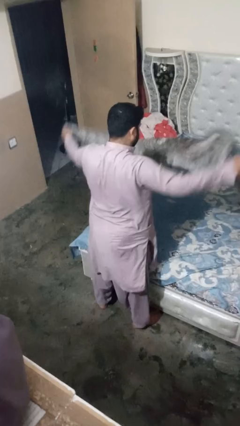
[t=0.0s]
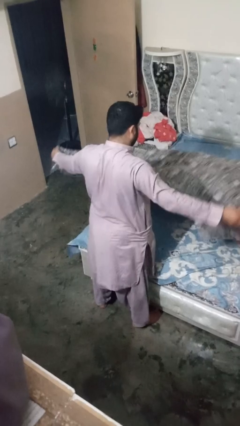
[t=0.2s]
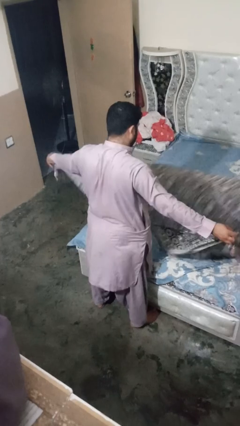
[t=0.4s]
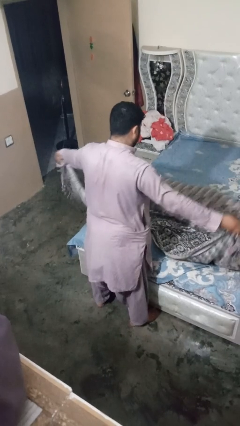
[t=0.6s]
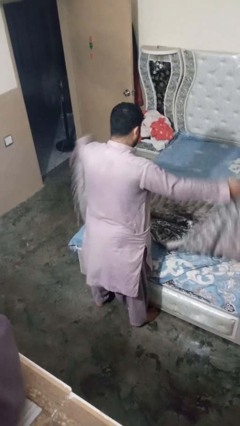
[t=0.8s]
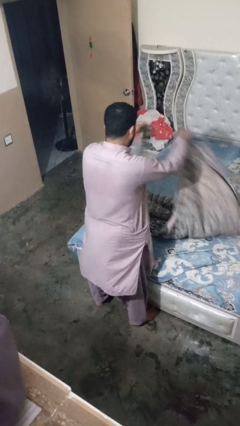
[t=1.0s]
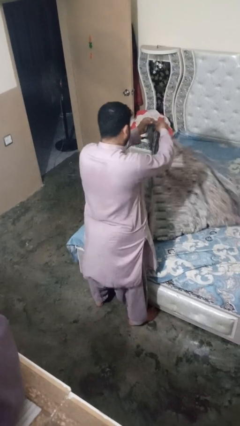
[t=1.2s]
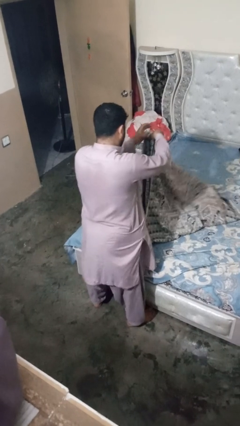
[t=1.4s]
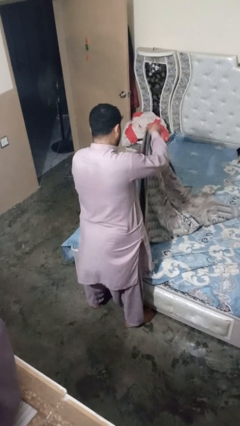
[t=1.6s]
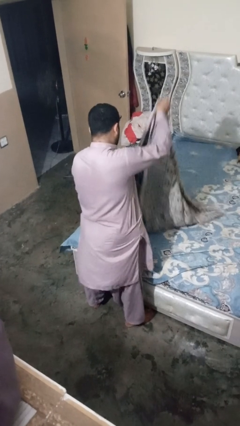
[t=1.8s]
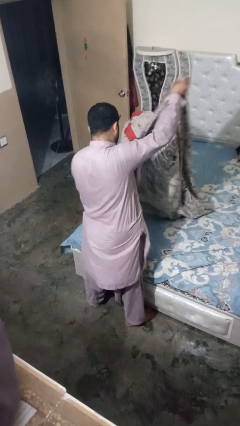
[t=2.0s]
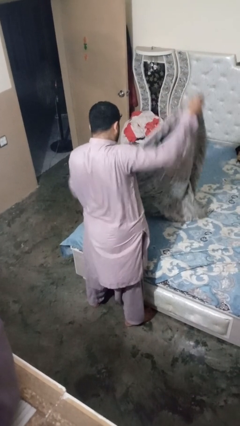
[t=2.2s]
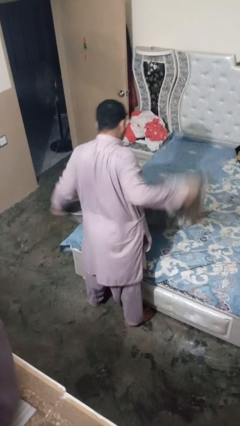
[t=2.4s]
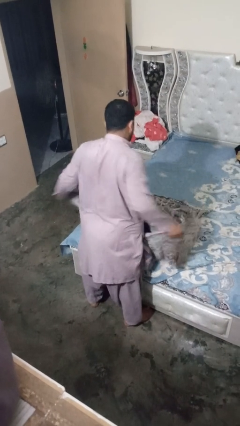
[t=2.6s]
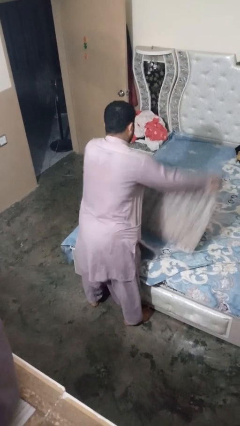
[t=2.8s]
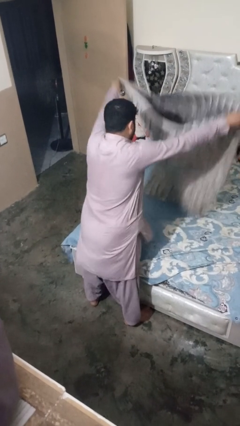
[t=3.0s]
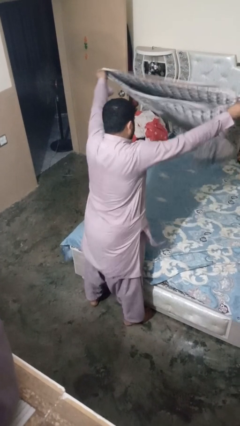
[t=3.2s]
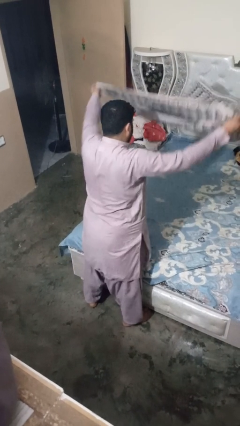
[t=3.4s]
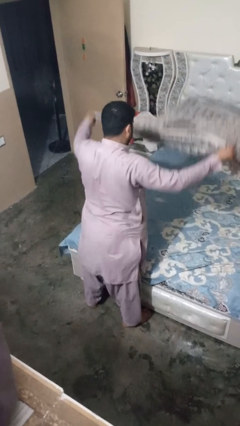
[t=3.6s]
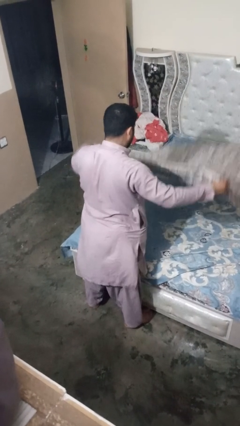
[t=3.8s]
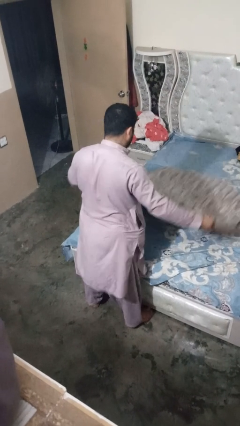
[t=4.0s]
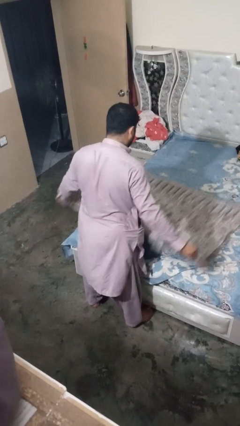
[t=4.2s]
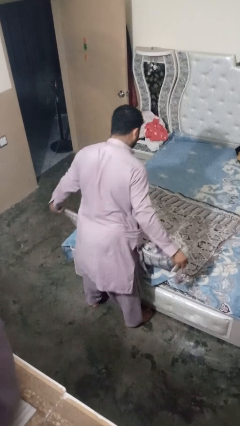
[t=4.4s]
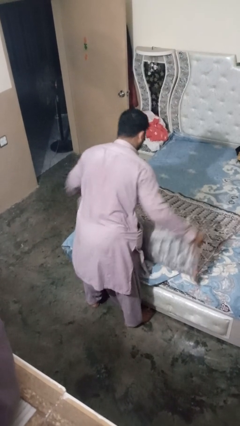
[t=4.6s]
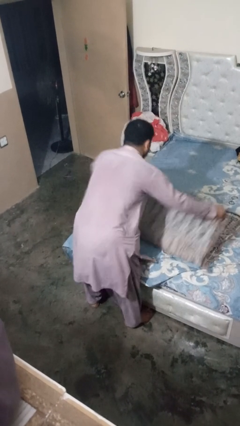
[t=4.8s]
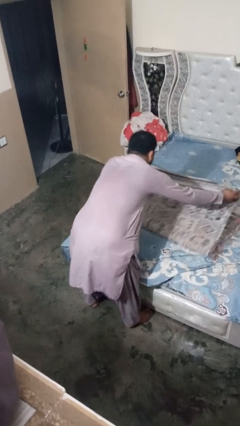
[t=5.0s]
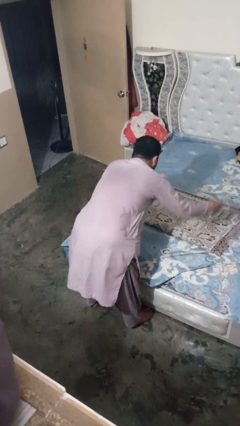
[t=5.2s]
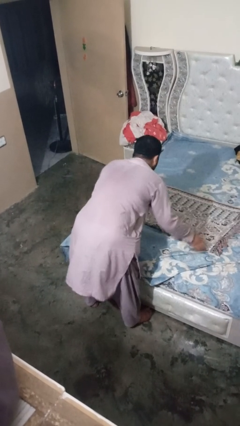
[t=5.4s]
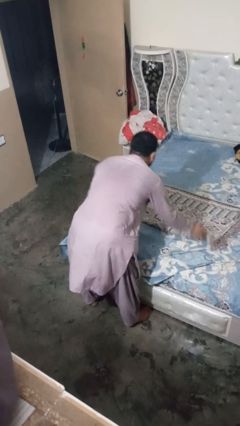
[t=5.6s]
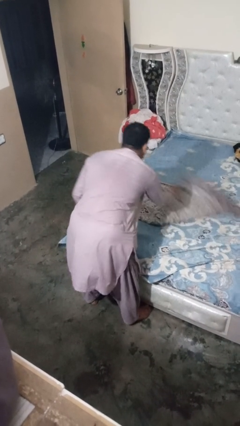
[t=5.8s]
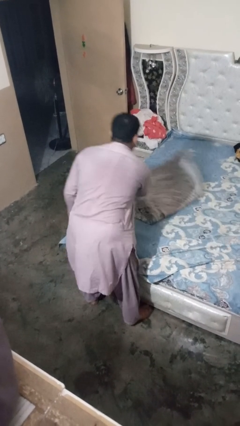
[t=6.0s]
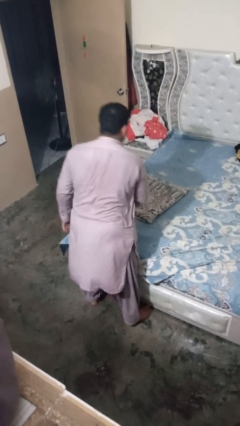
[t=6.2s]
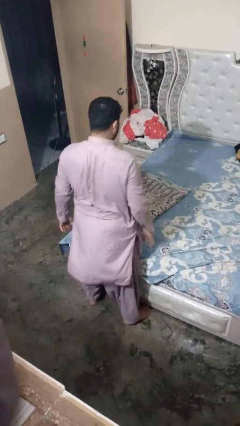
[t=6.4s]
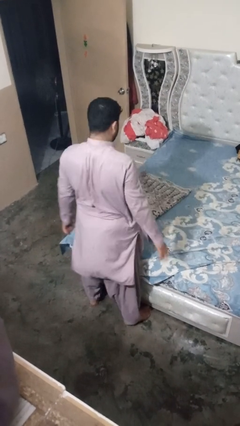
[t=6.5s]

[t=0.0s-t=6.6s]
person folds blanket

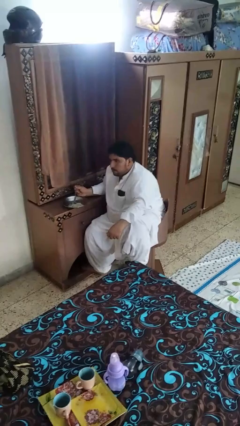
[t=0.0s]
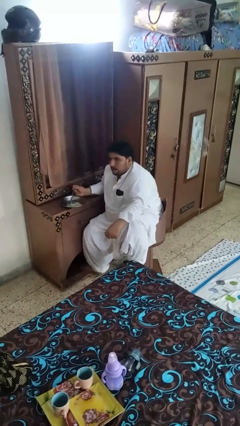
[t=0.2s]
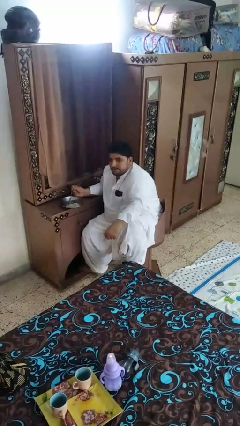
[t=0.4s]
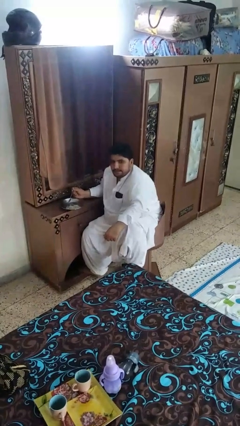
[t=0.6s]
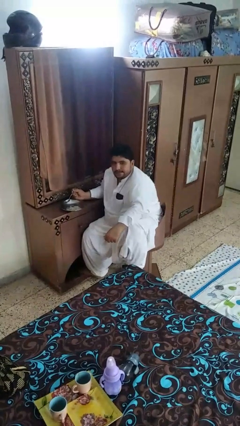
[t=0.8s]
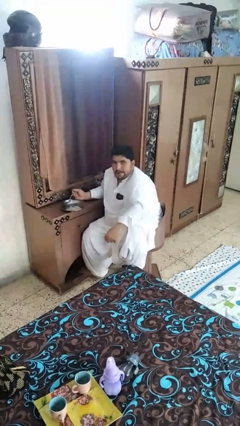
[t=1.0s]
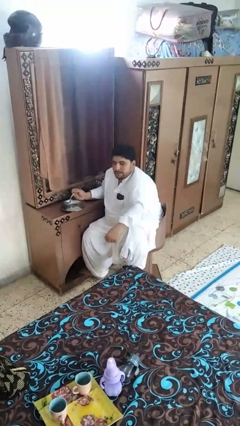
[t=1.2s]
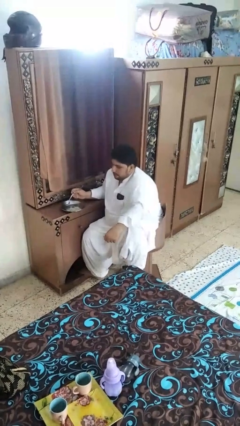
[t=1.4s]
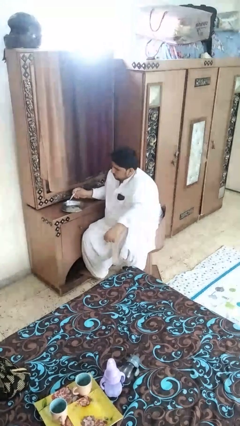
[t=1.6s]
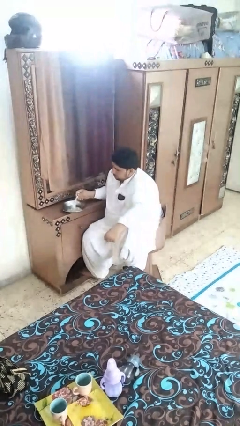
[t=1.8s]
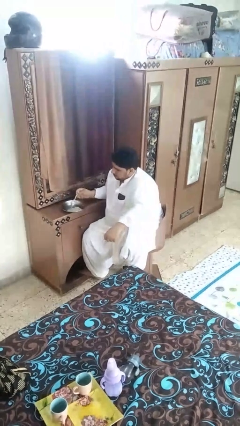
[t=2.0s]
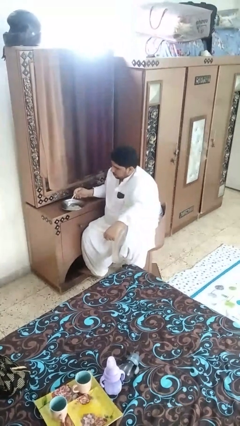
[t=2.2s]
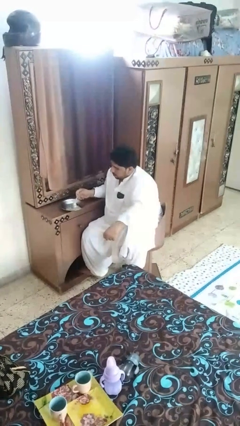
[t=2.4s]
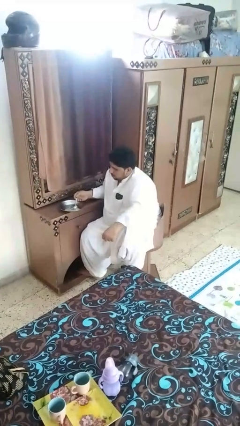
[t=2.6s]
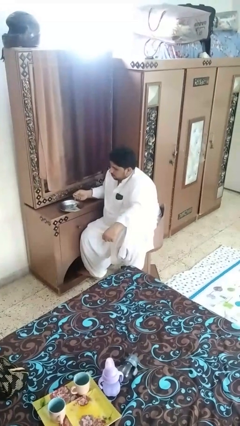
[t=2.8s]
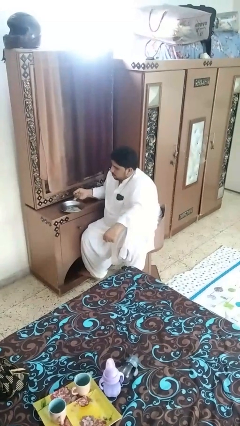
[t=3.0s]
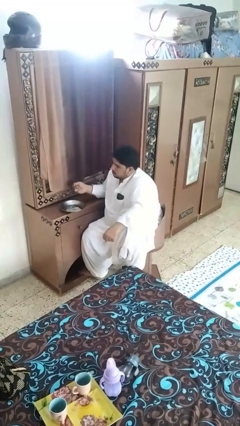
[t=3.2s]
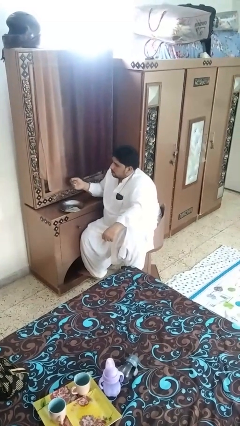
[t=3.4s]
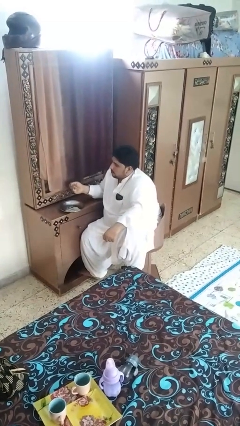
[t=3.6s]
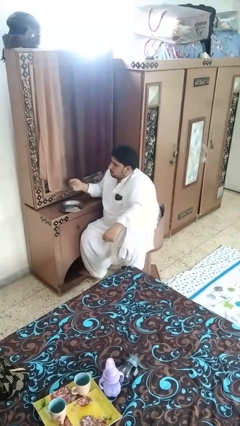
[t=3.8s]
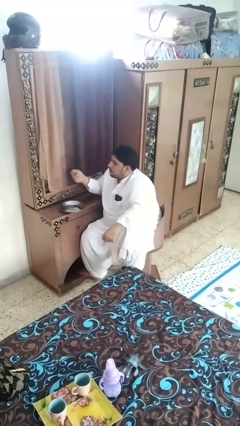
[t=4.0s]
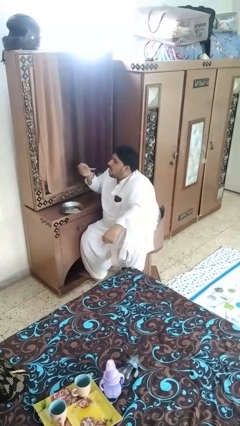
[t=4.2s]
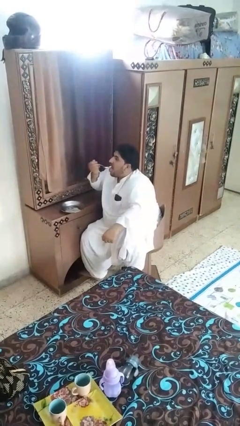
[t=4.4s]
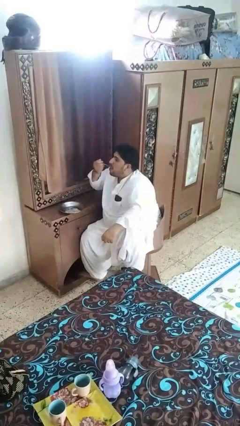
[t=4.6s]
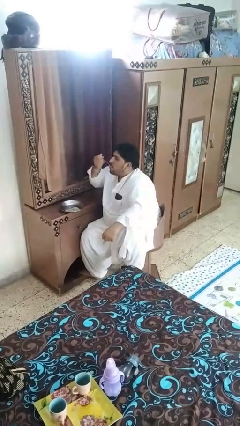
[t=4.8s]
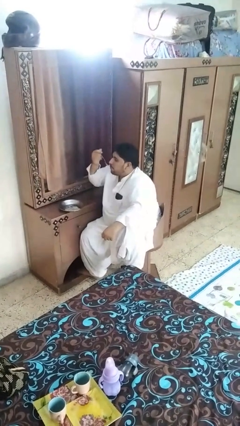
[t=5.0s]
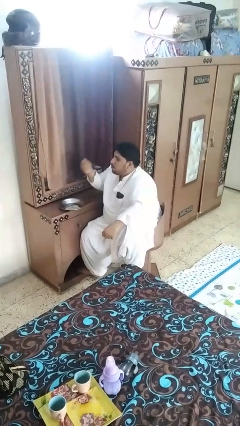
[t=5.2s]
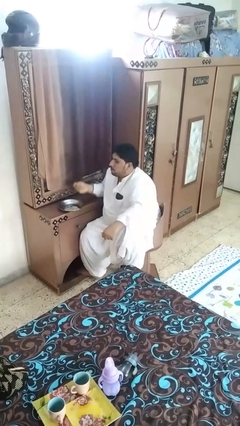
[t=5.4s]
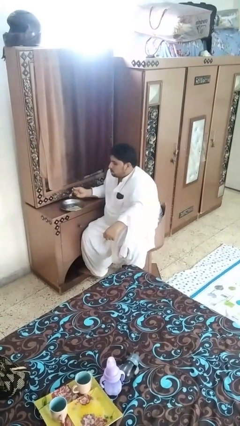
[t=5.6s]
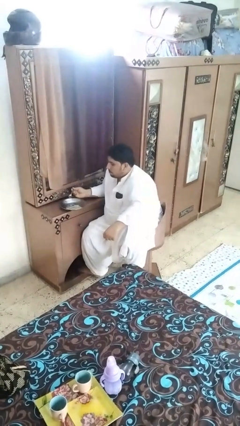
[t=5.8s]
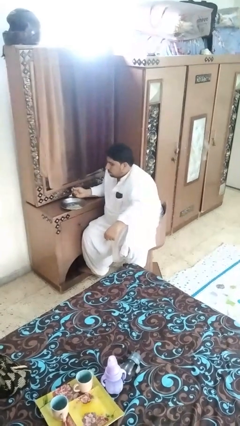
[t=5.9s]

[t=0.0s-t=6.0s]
person eats with utensil

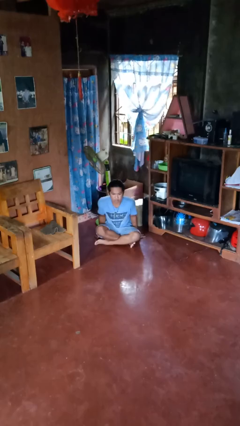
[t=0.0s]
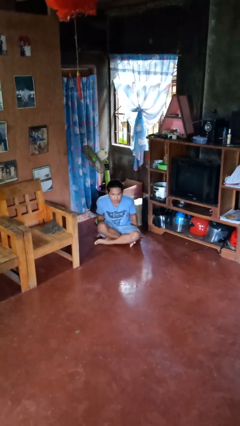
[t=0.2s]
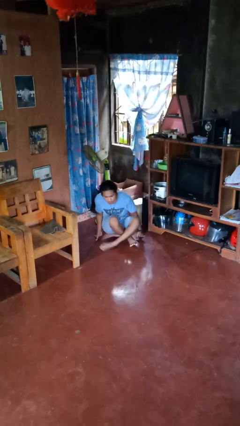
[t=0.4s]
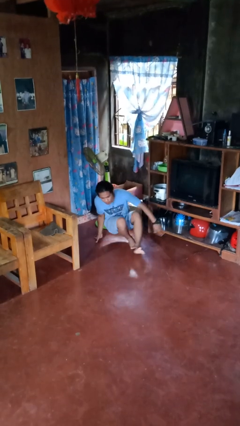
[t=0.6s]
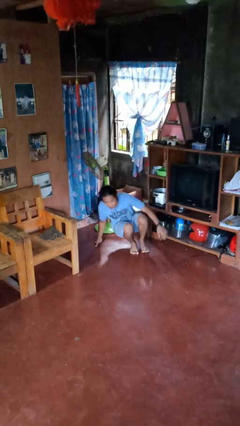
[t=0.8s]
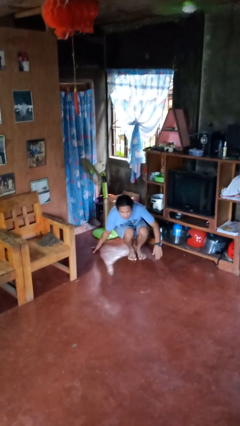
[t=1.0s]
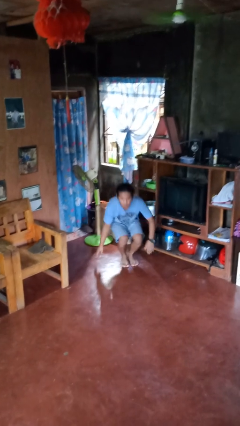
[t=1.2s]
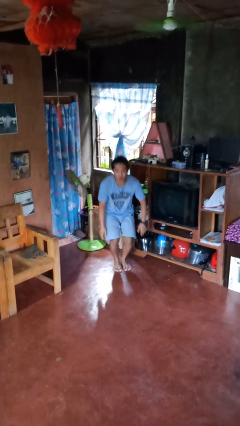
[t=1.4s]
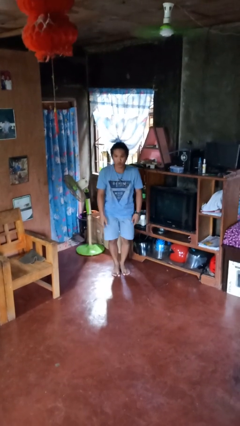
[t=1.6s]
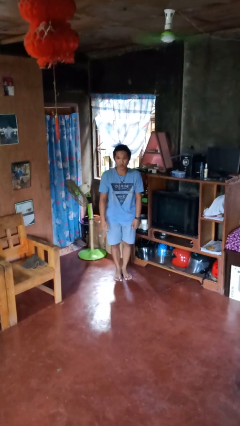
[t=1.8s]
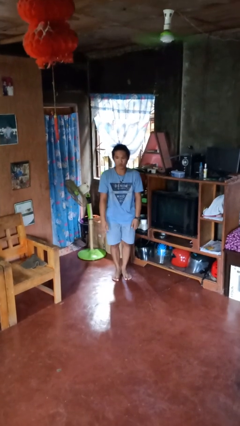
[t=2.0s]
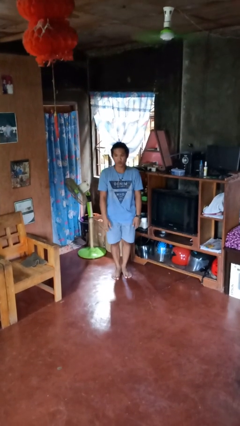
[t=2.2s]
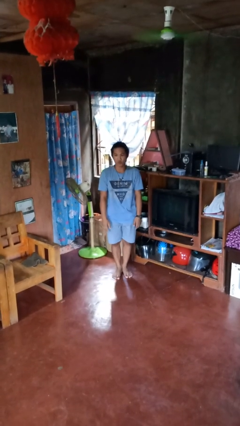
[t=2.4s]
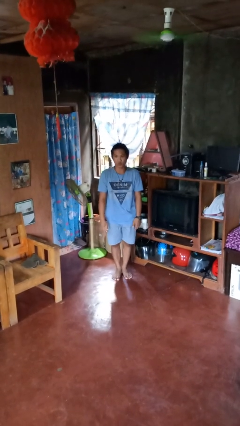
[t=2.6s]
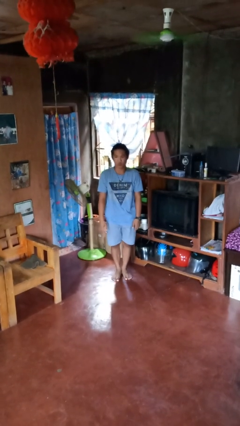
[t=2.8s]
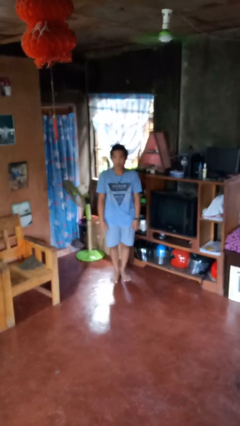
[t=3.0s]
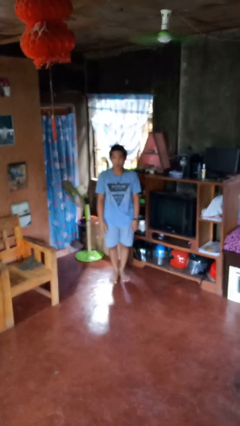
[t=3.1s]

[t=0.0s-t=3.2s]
person stands up from floor

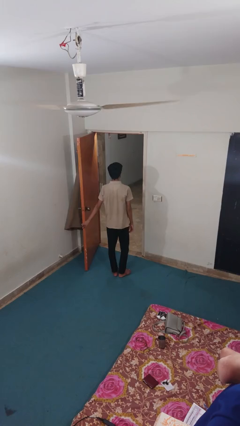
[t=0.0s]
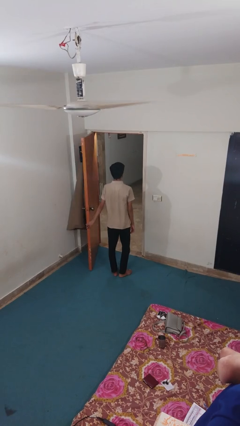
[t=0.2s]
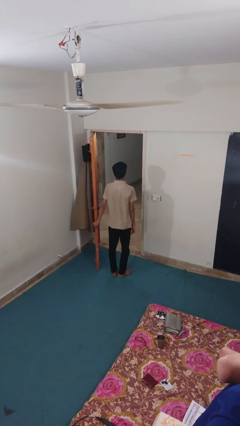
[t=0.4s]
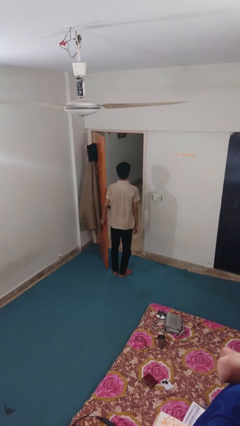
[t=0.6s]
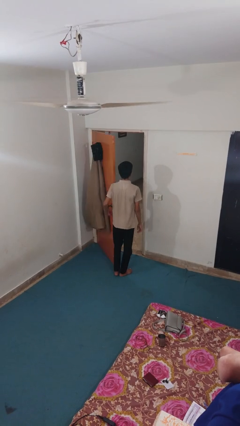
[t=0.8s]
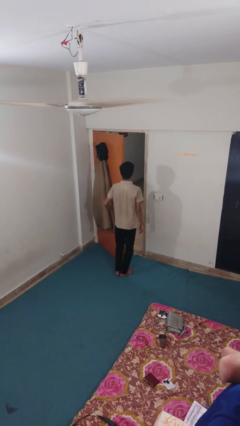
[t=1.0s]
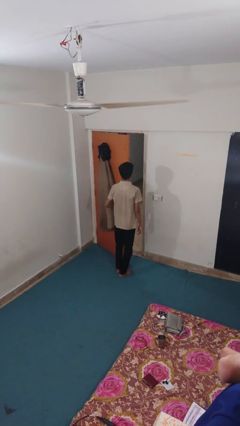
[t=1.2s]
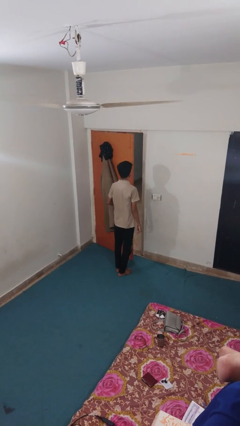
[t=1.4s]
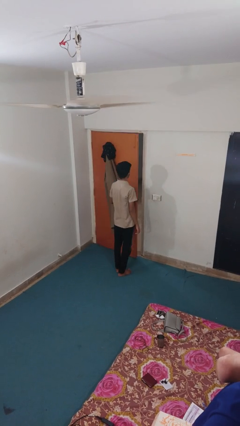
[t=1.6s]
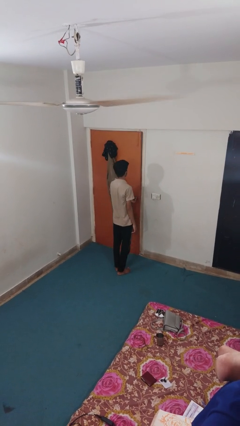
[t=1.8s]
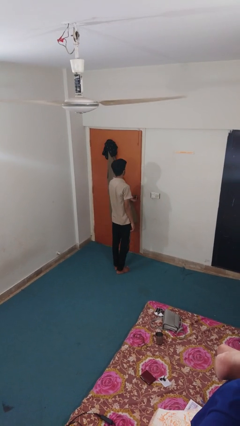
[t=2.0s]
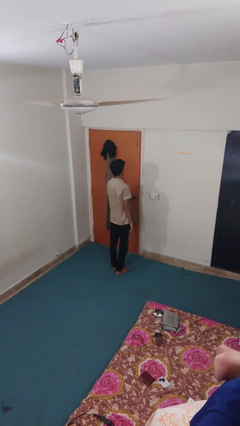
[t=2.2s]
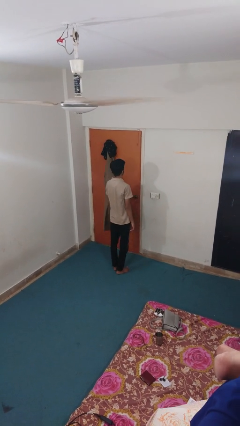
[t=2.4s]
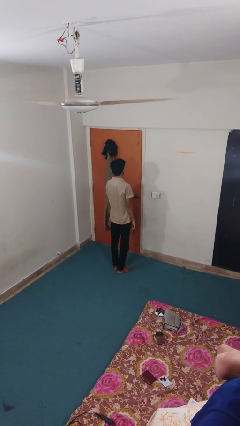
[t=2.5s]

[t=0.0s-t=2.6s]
person closes facility door
